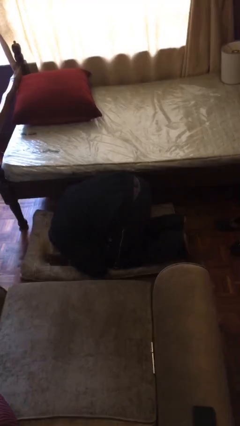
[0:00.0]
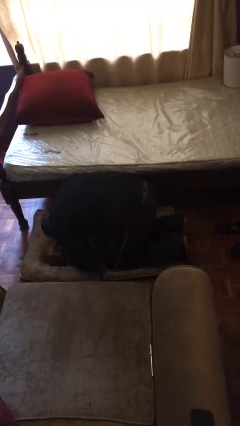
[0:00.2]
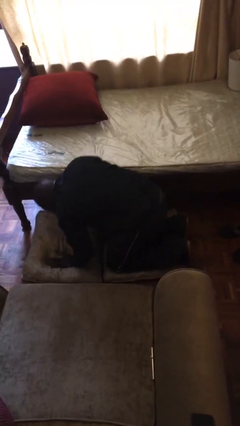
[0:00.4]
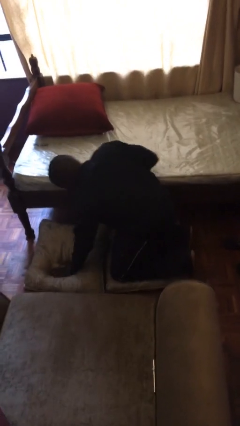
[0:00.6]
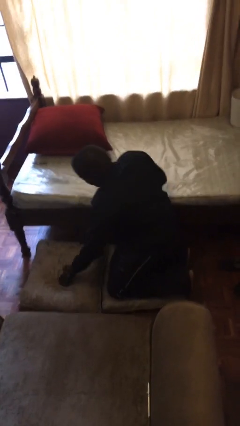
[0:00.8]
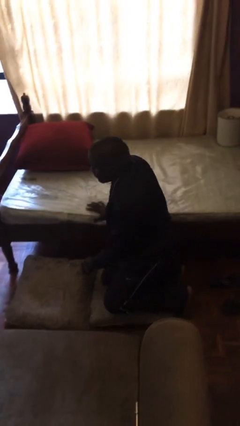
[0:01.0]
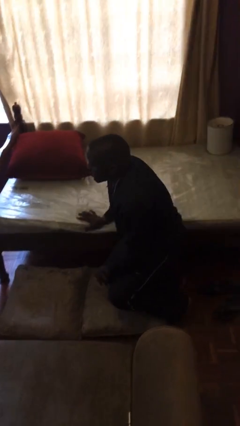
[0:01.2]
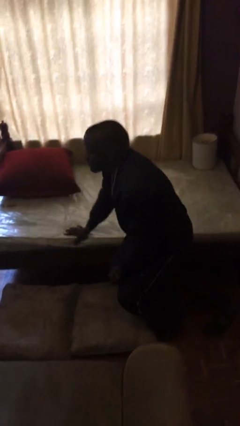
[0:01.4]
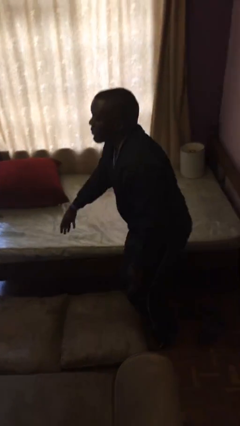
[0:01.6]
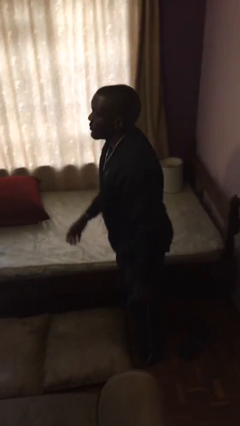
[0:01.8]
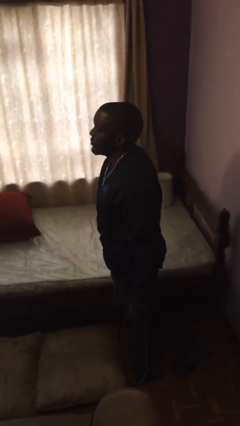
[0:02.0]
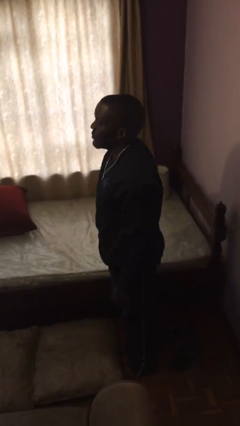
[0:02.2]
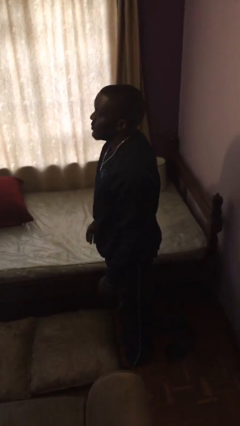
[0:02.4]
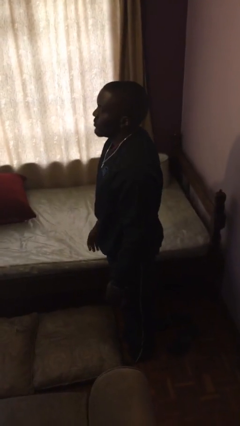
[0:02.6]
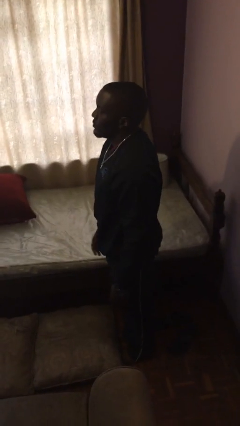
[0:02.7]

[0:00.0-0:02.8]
person stands up from floor

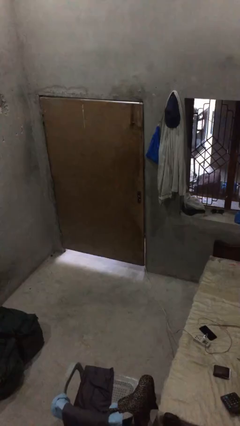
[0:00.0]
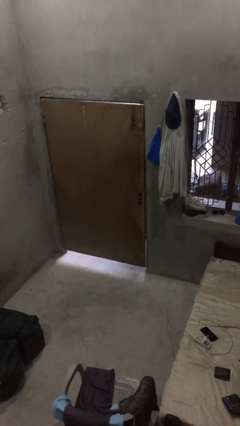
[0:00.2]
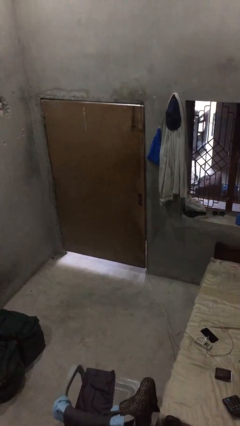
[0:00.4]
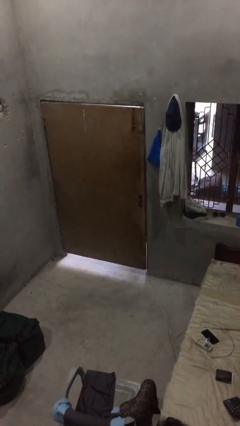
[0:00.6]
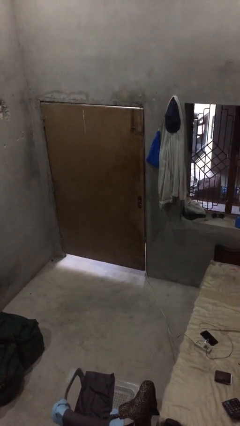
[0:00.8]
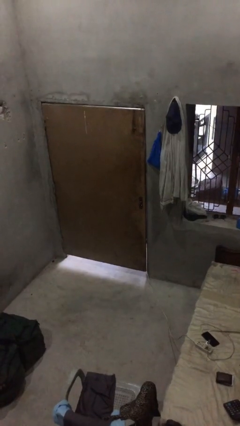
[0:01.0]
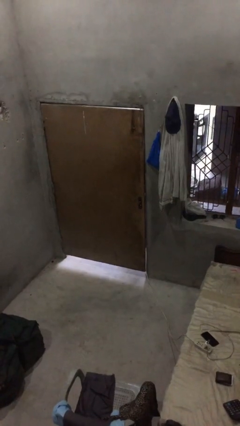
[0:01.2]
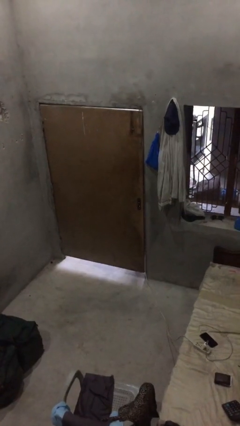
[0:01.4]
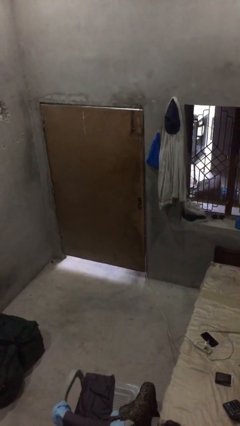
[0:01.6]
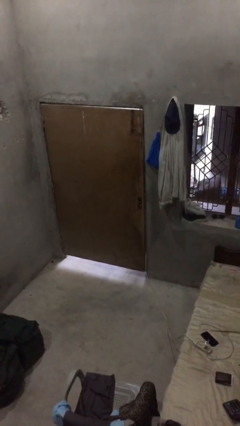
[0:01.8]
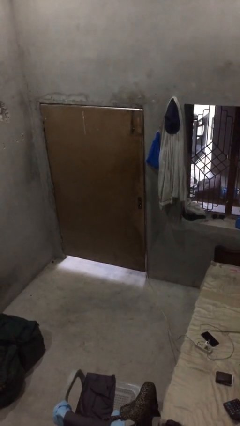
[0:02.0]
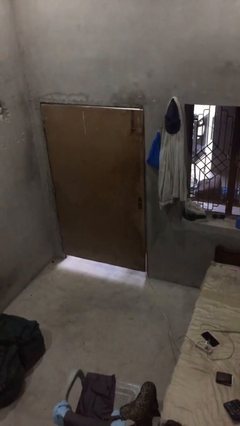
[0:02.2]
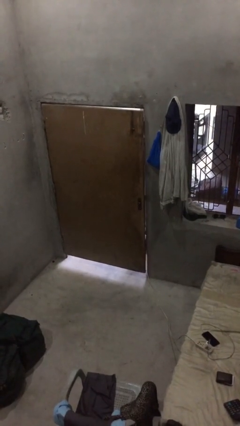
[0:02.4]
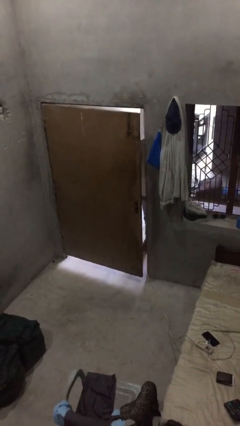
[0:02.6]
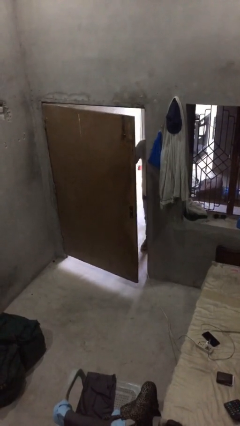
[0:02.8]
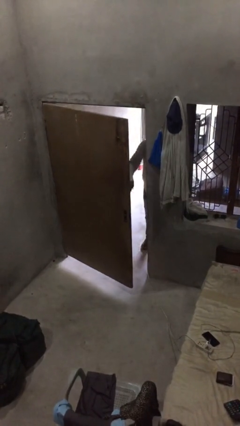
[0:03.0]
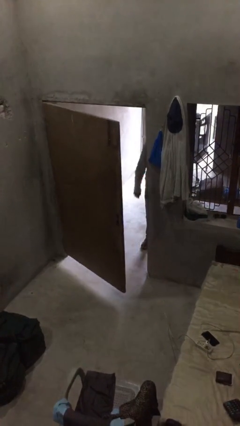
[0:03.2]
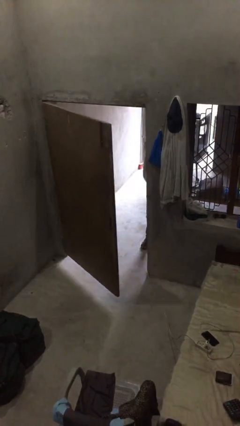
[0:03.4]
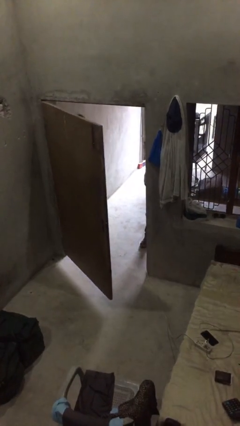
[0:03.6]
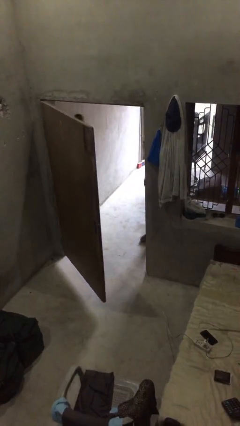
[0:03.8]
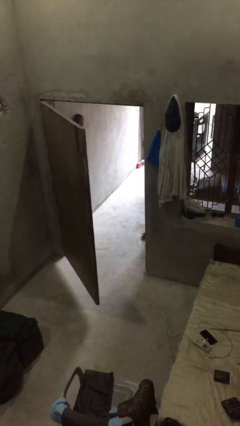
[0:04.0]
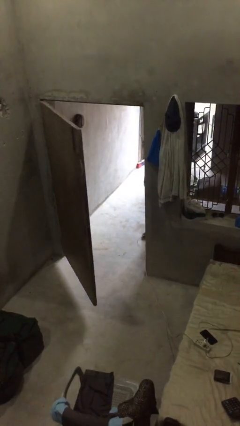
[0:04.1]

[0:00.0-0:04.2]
person opens facility door

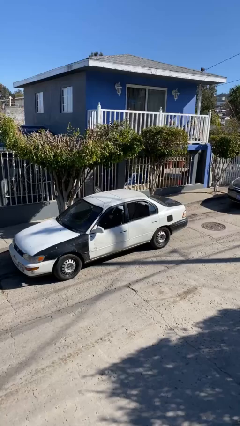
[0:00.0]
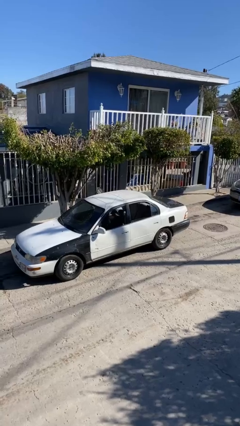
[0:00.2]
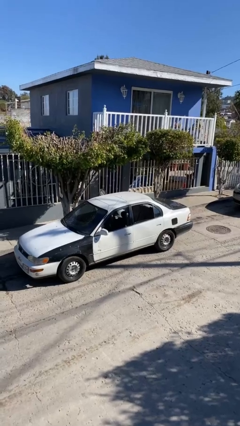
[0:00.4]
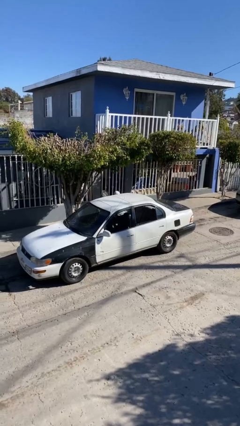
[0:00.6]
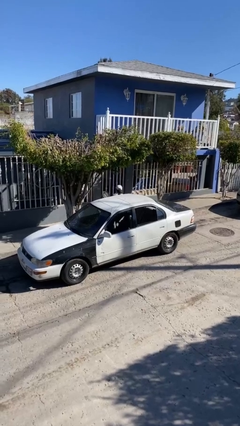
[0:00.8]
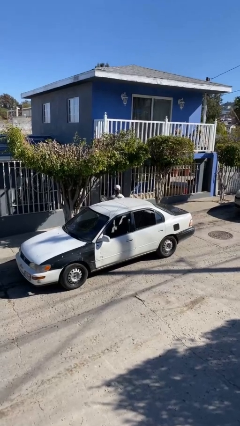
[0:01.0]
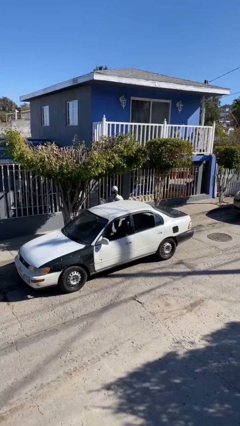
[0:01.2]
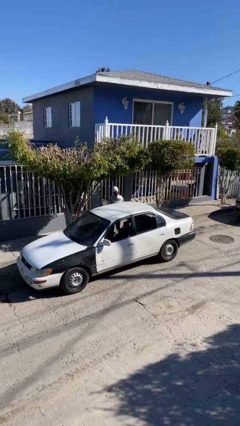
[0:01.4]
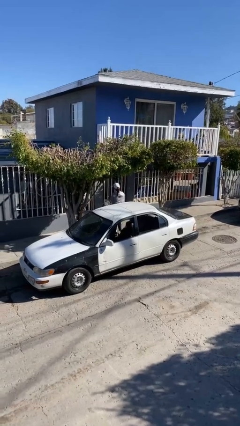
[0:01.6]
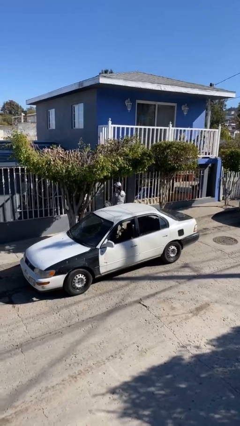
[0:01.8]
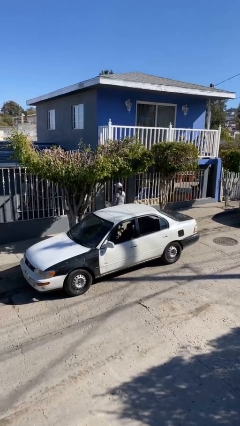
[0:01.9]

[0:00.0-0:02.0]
person exits car

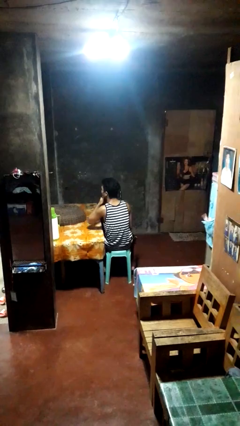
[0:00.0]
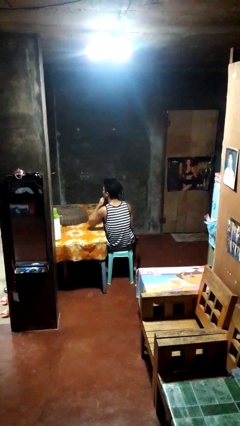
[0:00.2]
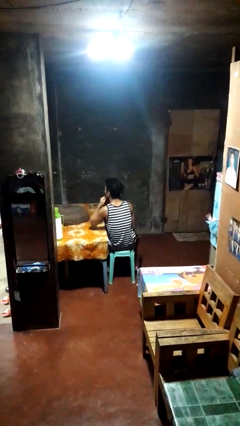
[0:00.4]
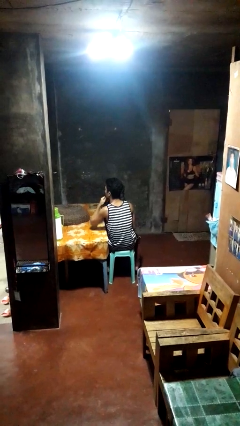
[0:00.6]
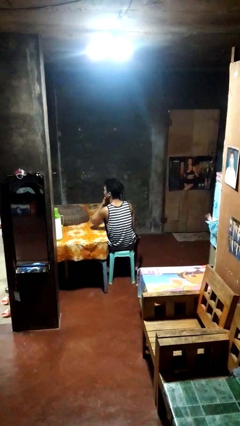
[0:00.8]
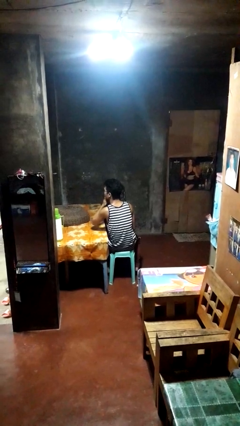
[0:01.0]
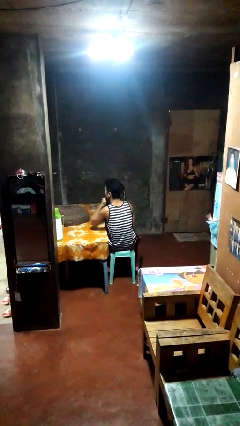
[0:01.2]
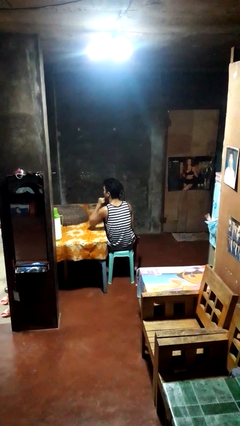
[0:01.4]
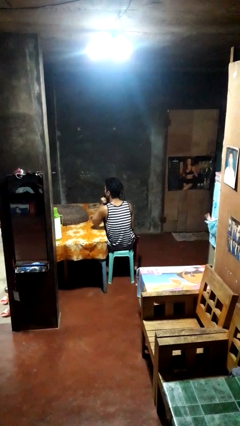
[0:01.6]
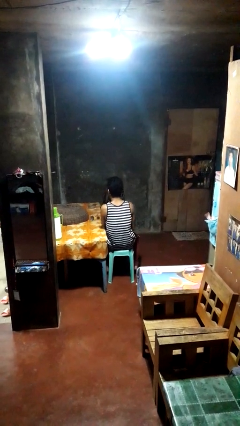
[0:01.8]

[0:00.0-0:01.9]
person strokes chin

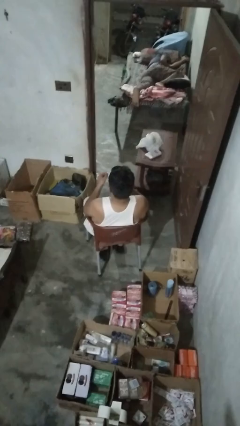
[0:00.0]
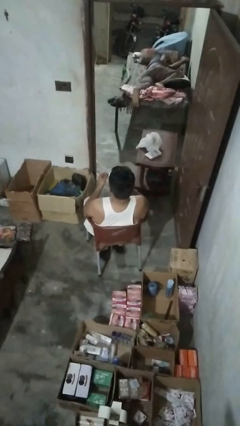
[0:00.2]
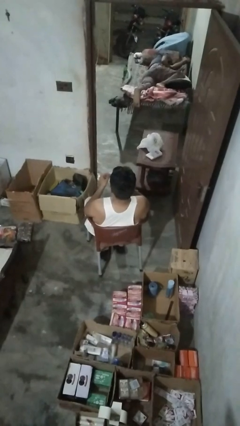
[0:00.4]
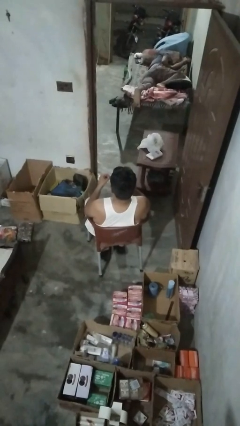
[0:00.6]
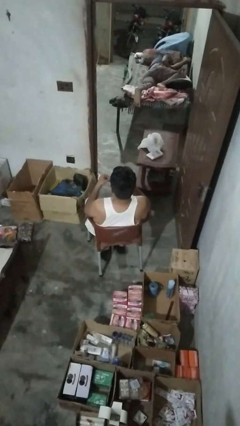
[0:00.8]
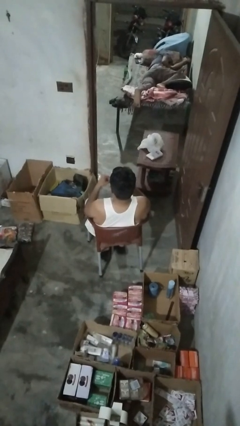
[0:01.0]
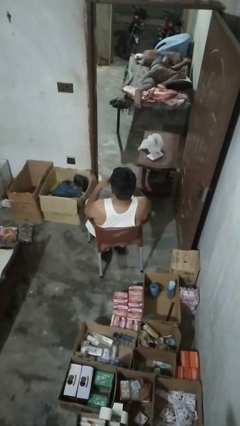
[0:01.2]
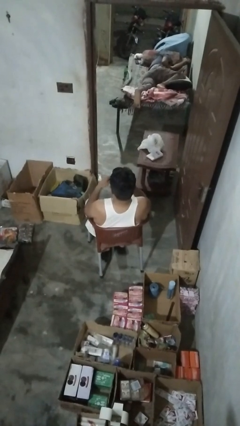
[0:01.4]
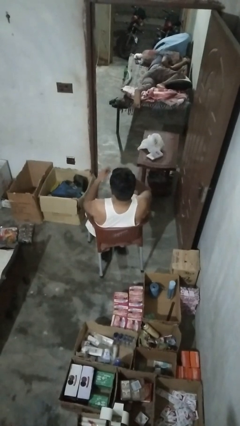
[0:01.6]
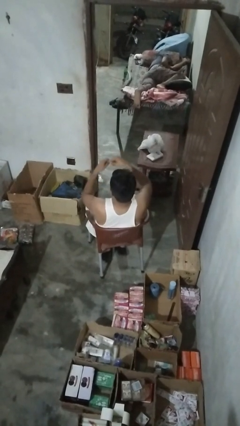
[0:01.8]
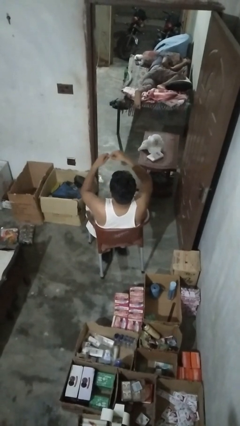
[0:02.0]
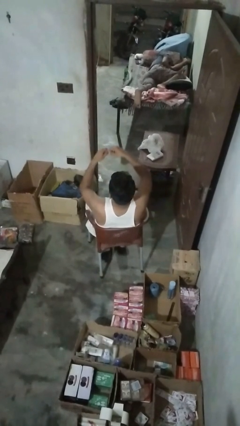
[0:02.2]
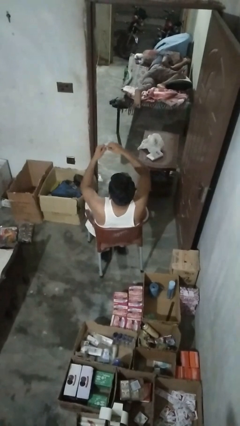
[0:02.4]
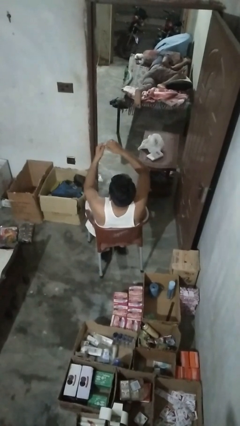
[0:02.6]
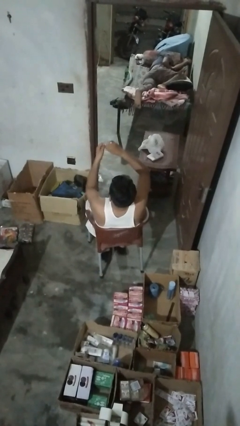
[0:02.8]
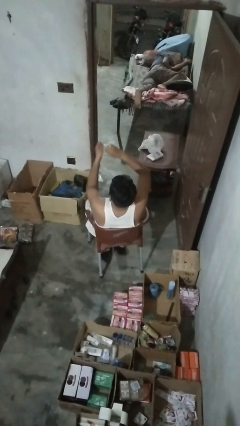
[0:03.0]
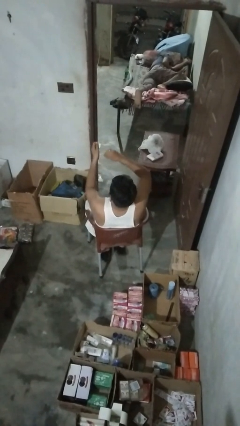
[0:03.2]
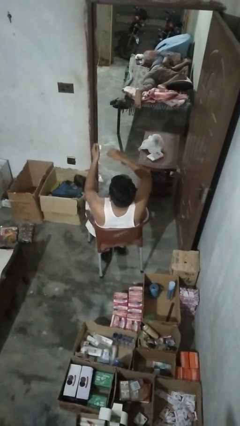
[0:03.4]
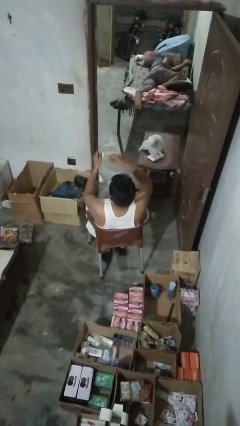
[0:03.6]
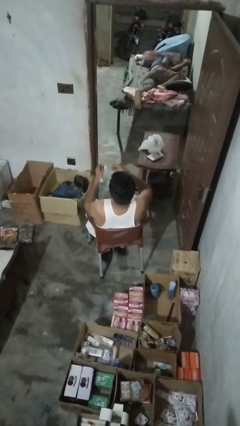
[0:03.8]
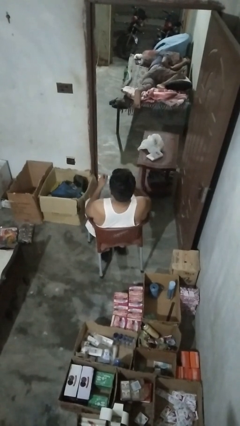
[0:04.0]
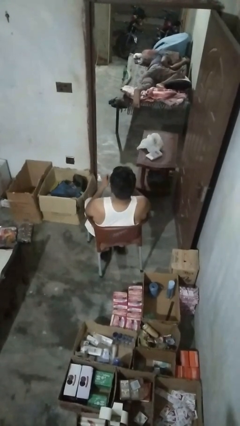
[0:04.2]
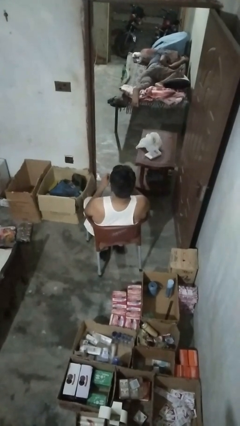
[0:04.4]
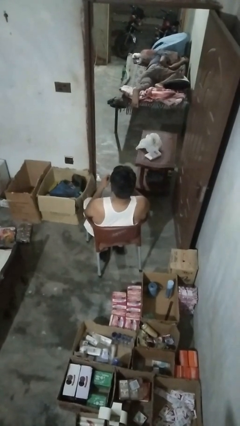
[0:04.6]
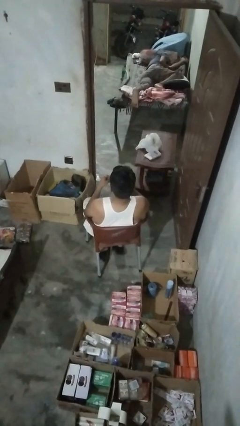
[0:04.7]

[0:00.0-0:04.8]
person tears paper

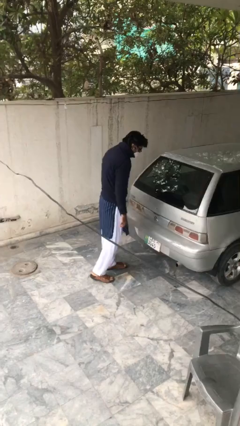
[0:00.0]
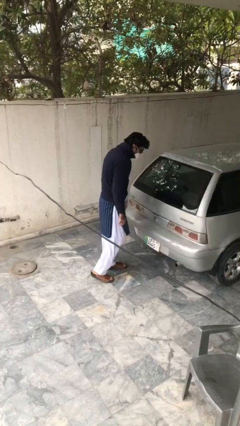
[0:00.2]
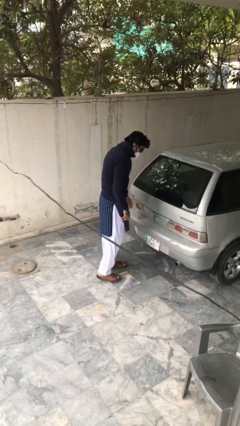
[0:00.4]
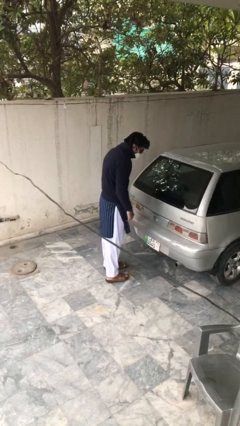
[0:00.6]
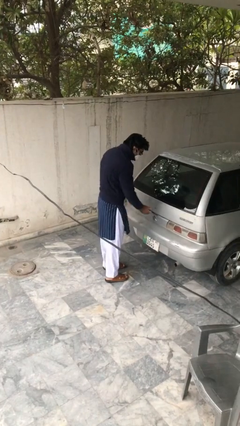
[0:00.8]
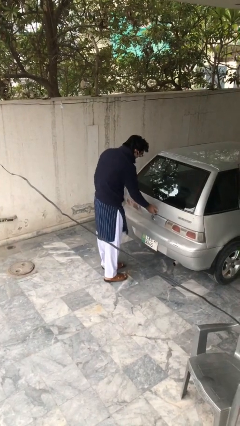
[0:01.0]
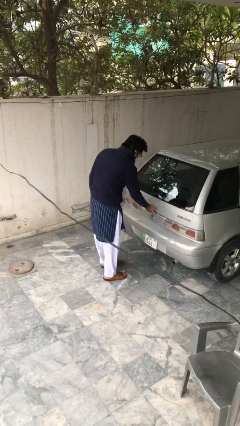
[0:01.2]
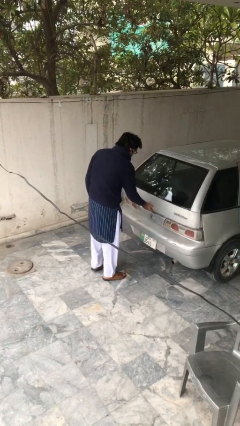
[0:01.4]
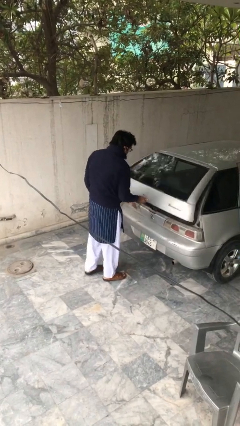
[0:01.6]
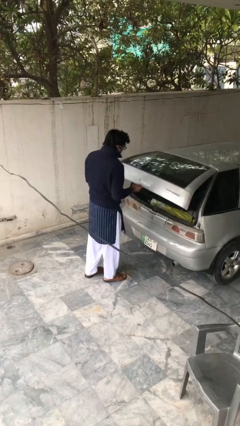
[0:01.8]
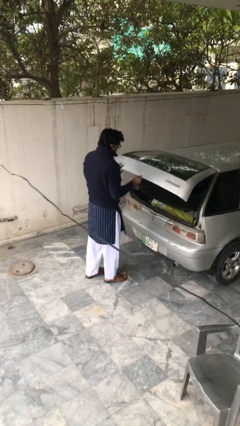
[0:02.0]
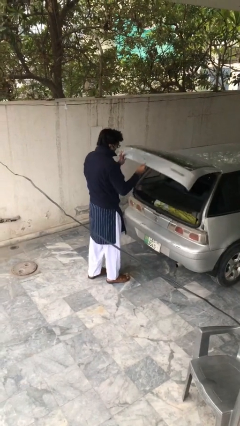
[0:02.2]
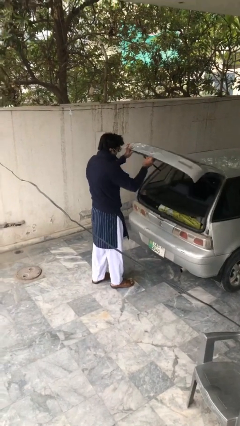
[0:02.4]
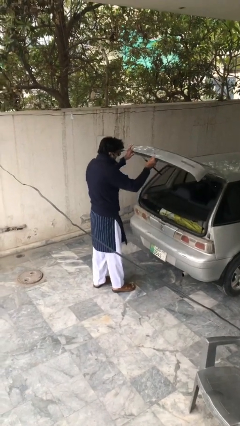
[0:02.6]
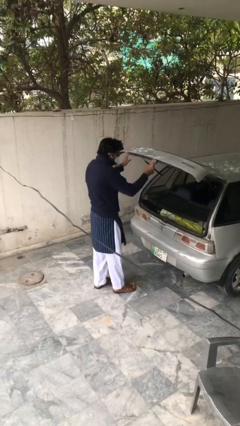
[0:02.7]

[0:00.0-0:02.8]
person opens car trunk
